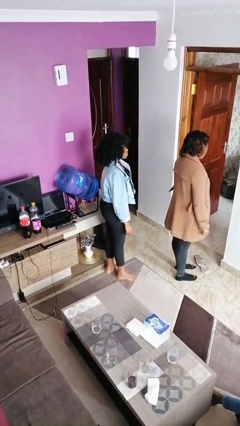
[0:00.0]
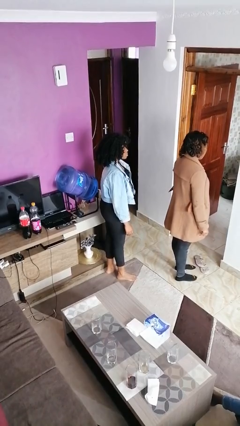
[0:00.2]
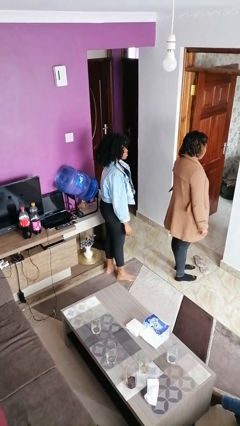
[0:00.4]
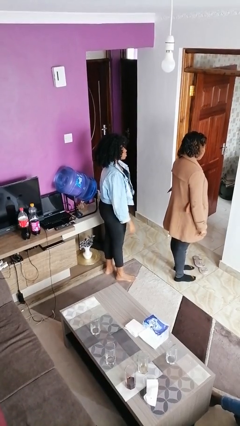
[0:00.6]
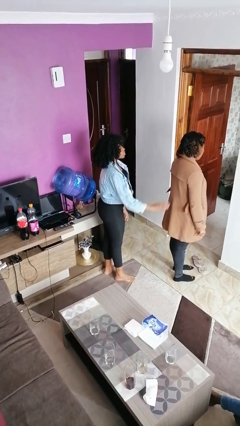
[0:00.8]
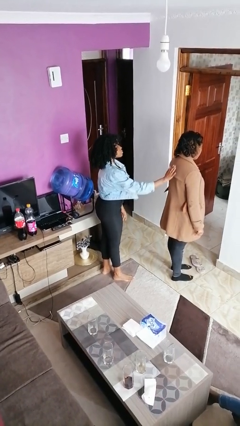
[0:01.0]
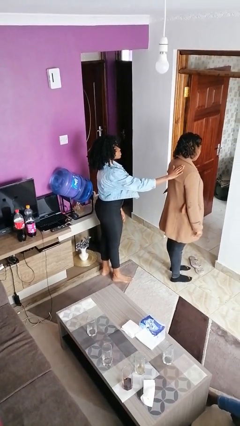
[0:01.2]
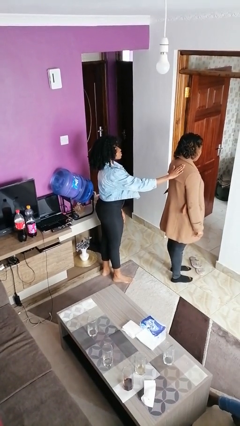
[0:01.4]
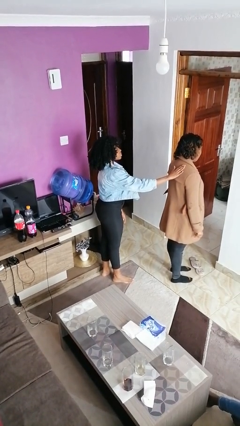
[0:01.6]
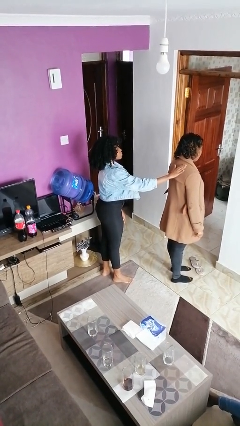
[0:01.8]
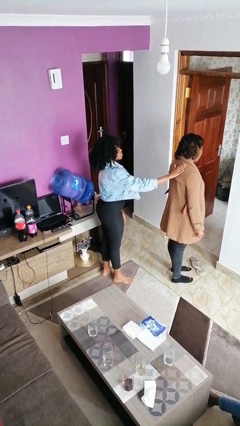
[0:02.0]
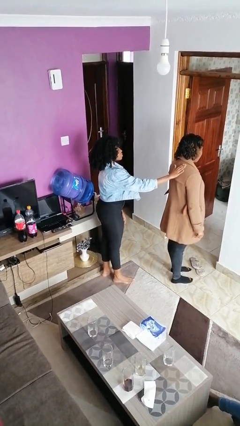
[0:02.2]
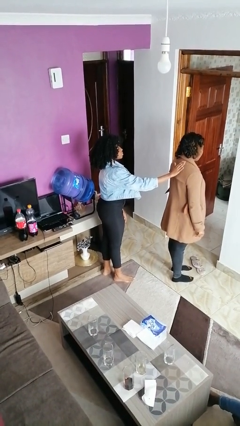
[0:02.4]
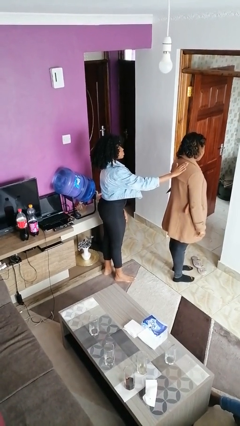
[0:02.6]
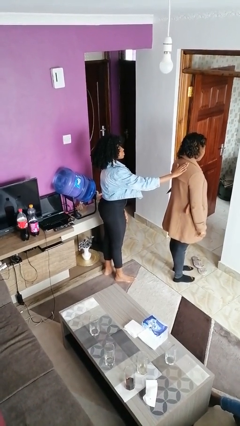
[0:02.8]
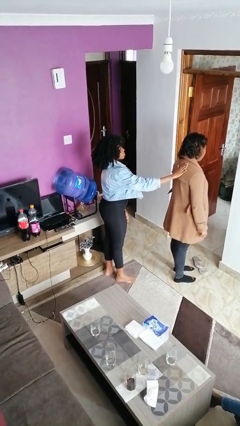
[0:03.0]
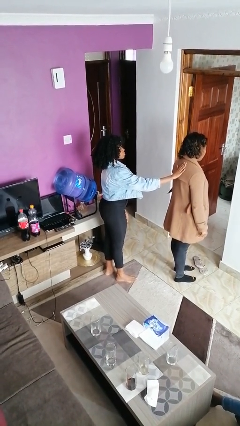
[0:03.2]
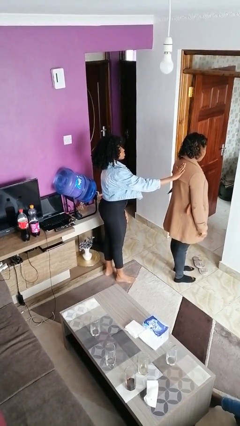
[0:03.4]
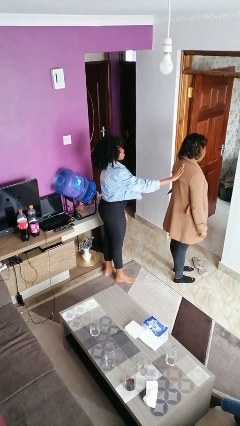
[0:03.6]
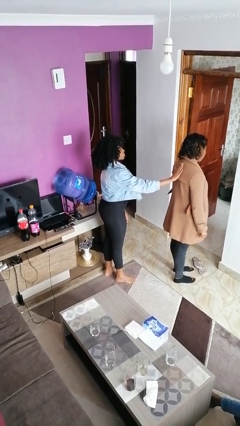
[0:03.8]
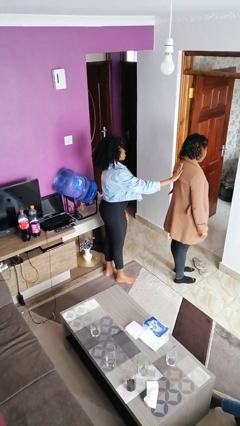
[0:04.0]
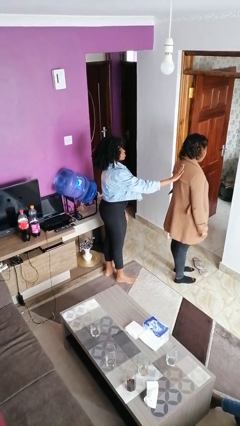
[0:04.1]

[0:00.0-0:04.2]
person touches back of person

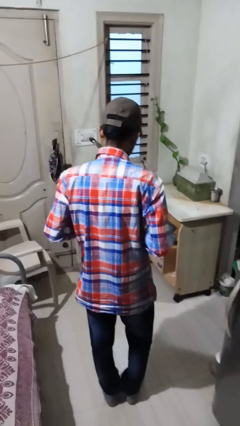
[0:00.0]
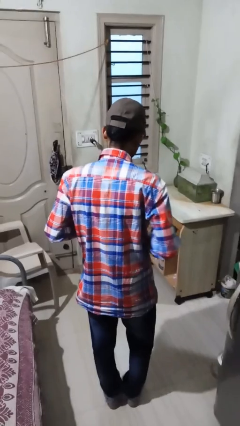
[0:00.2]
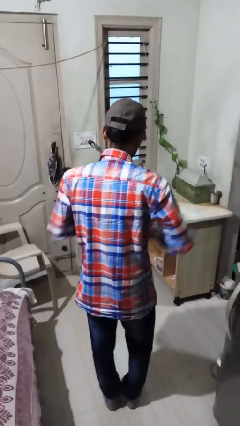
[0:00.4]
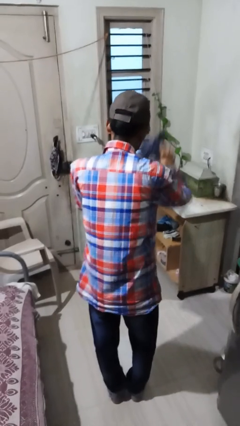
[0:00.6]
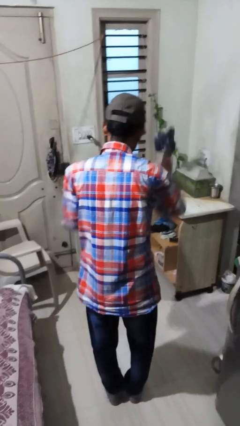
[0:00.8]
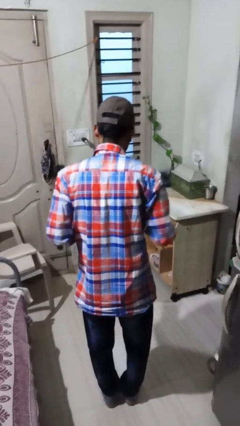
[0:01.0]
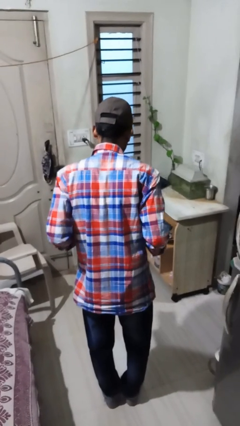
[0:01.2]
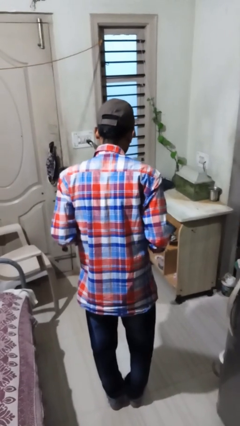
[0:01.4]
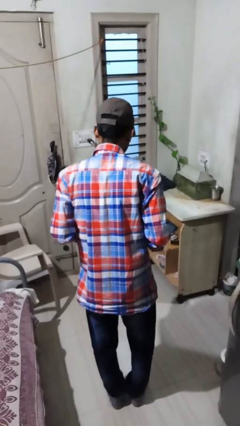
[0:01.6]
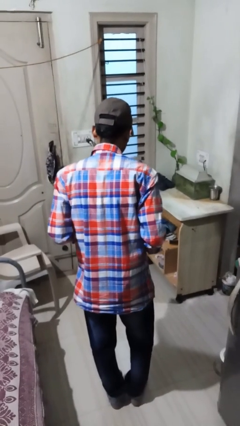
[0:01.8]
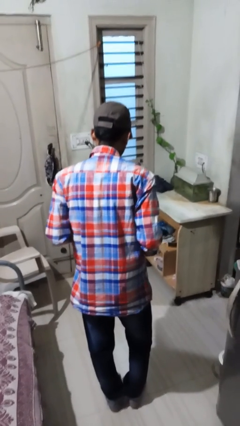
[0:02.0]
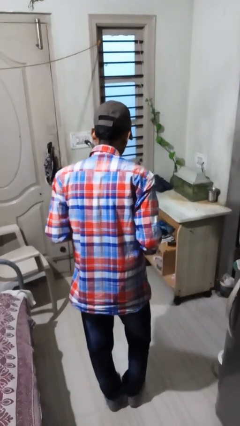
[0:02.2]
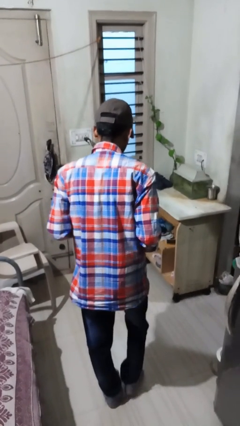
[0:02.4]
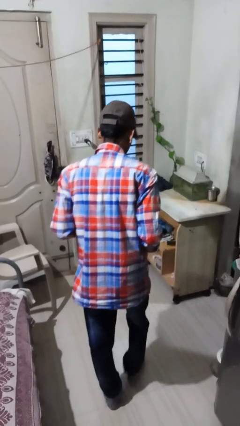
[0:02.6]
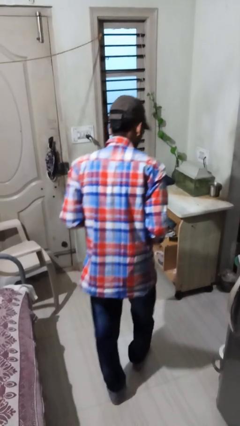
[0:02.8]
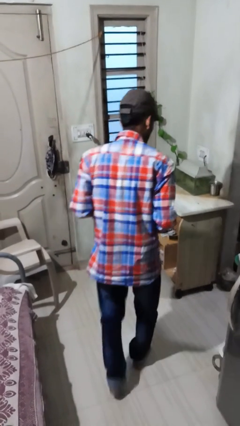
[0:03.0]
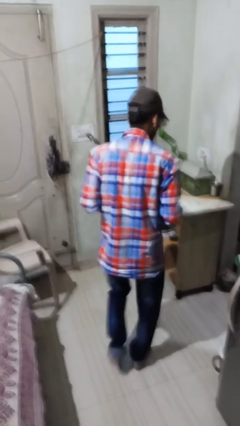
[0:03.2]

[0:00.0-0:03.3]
person throws object on table

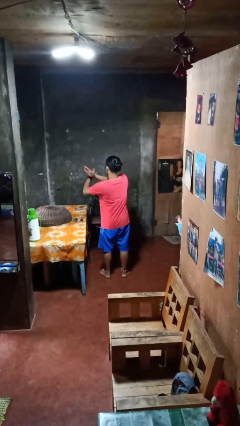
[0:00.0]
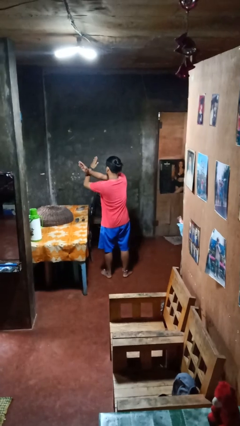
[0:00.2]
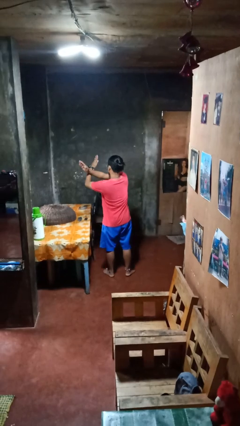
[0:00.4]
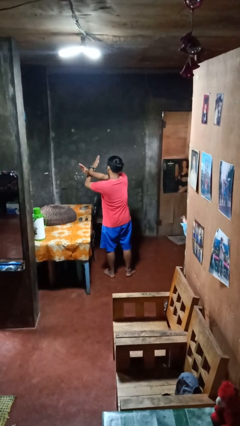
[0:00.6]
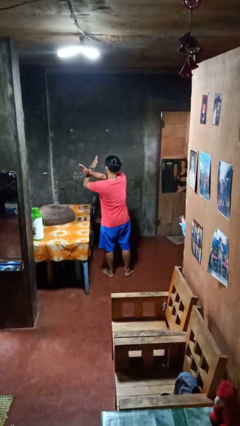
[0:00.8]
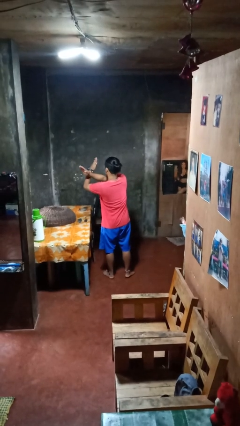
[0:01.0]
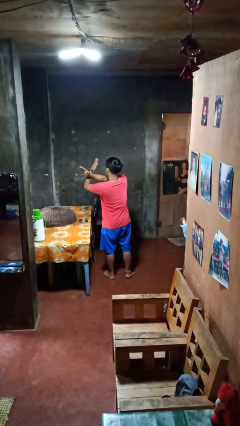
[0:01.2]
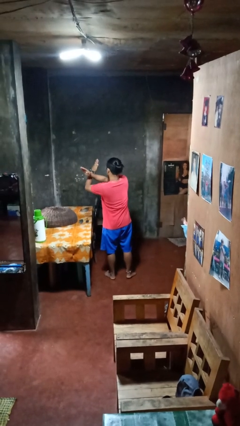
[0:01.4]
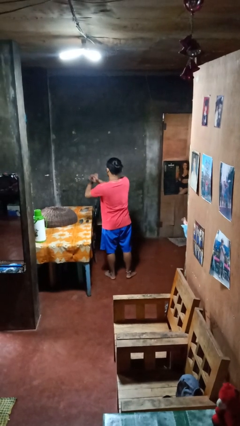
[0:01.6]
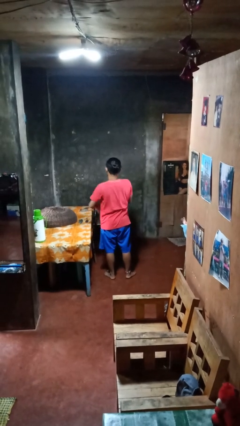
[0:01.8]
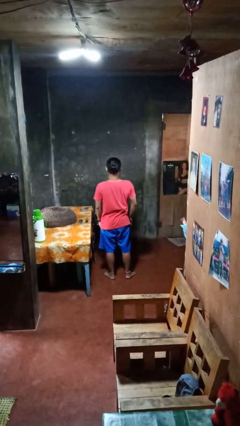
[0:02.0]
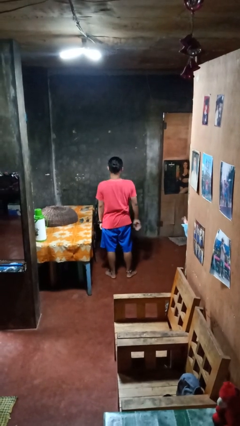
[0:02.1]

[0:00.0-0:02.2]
person gestures arms x

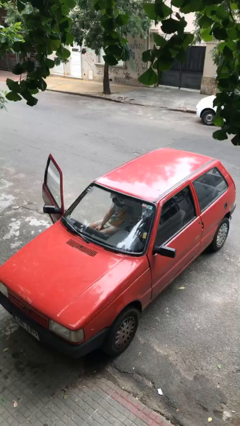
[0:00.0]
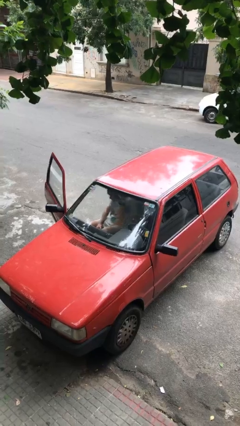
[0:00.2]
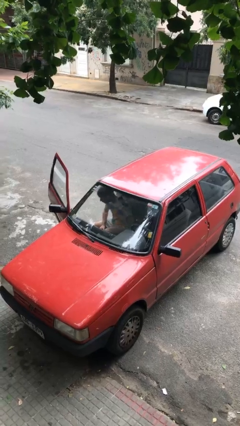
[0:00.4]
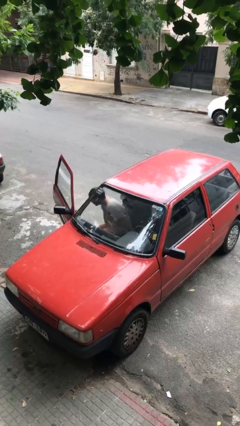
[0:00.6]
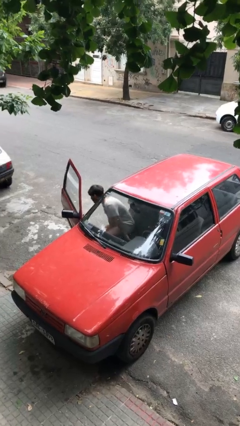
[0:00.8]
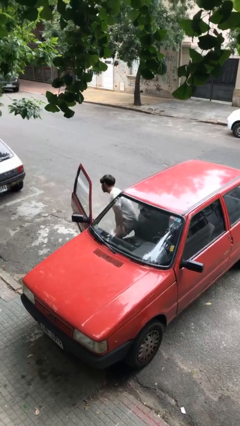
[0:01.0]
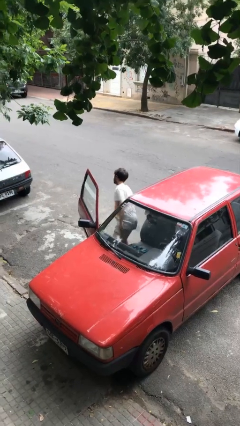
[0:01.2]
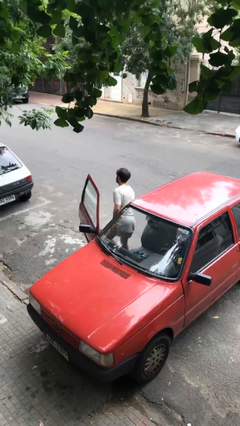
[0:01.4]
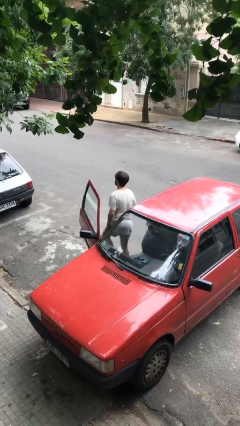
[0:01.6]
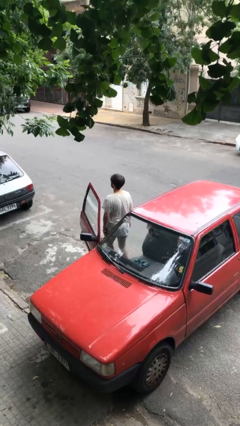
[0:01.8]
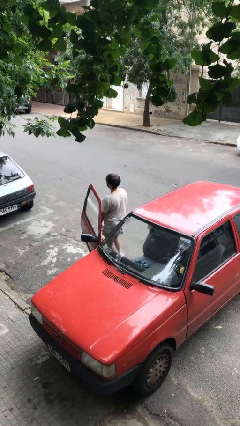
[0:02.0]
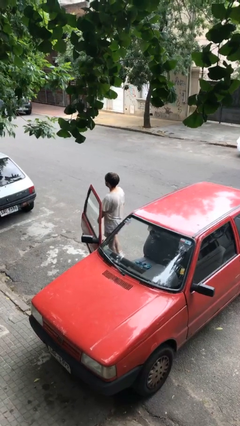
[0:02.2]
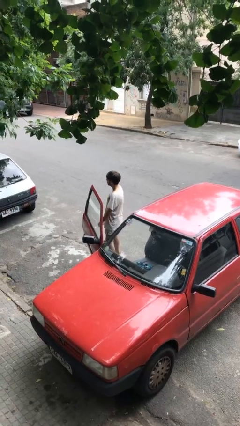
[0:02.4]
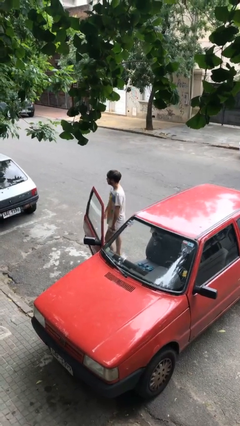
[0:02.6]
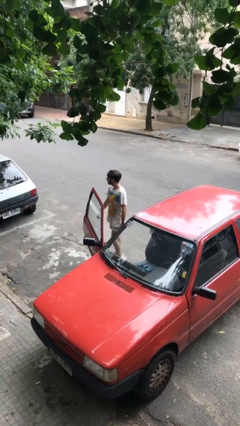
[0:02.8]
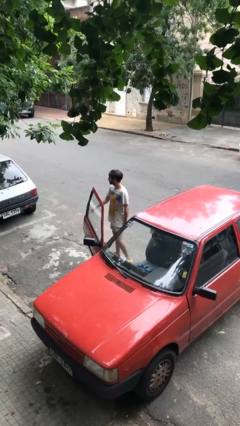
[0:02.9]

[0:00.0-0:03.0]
person exits car

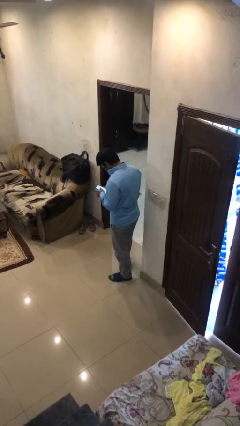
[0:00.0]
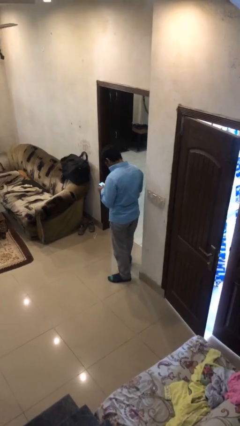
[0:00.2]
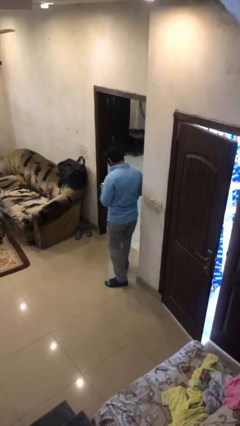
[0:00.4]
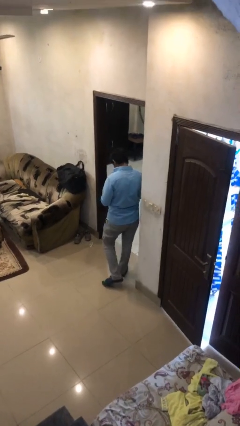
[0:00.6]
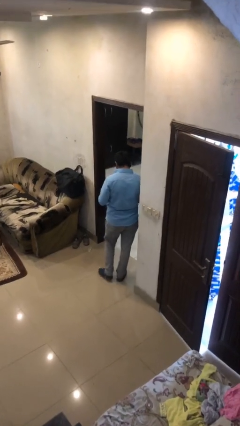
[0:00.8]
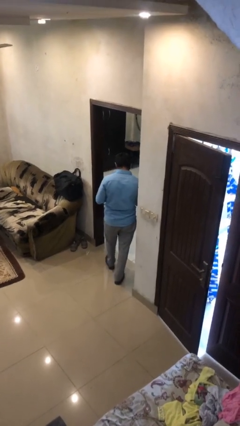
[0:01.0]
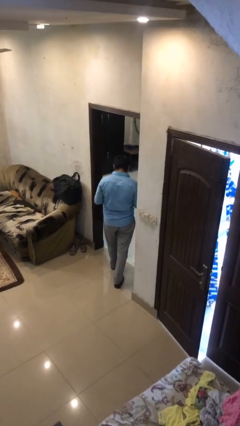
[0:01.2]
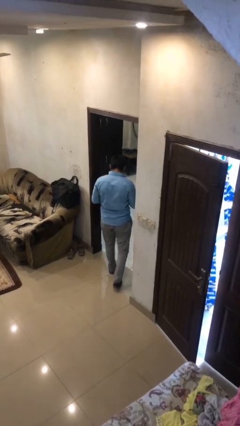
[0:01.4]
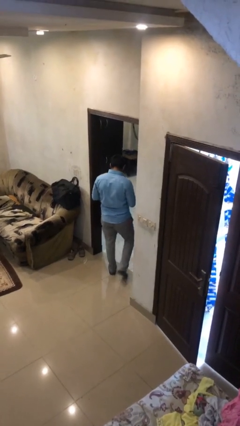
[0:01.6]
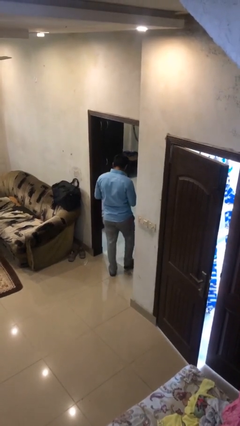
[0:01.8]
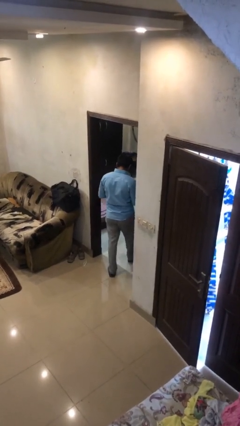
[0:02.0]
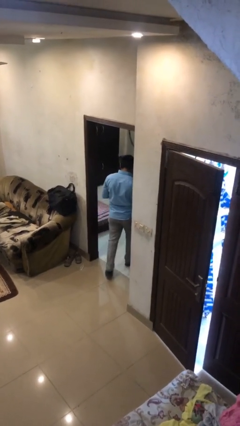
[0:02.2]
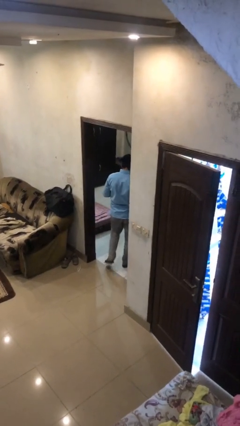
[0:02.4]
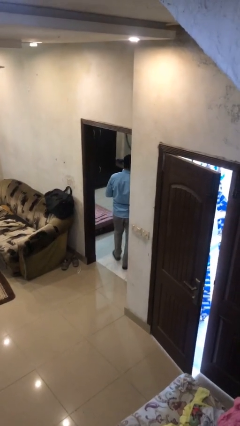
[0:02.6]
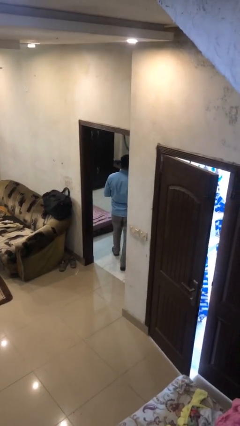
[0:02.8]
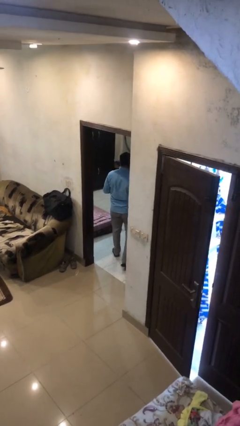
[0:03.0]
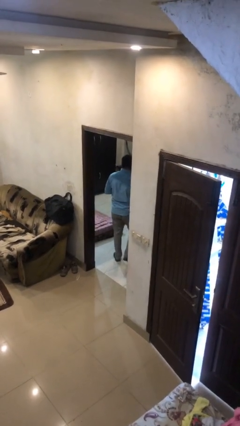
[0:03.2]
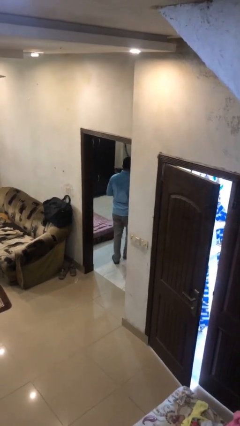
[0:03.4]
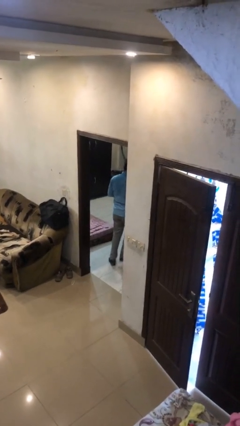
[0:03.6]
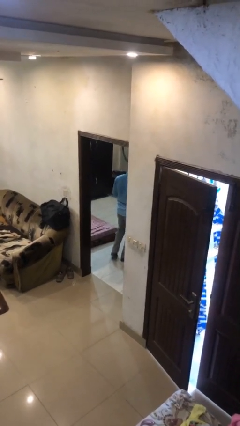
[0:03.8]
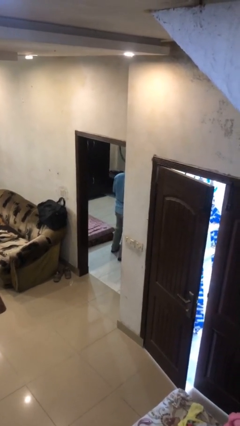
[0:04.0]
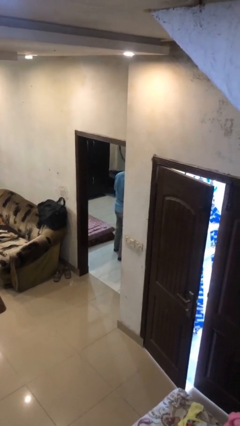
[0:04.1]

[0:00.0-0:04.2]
person exits scene through structure

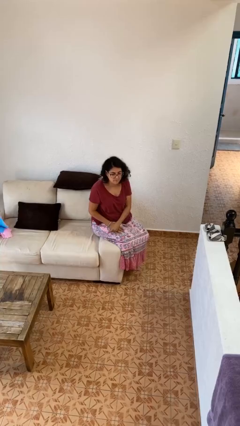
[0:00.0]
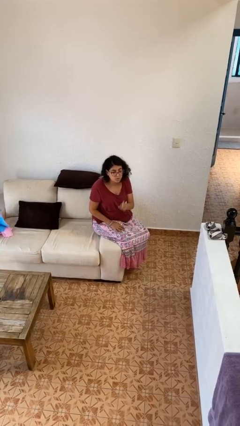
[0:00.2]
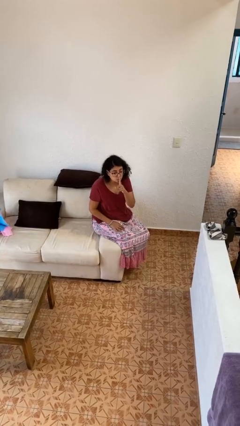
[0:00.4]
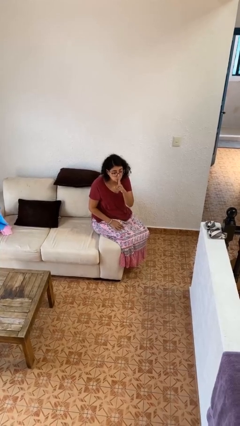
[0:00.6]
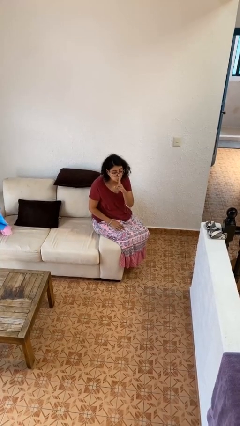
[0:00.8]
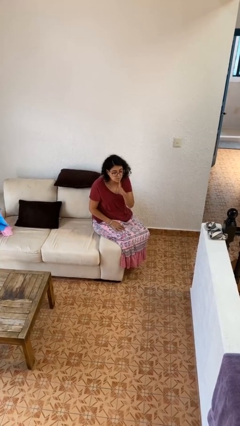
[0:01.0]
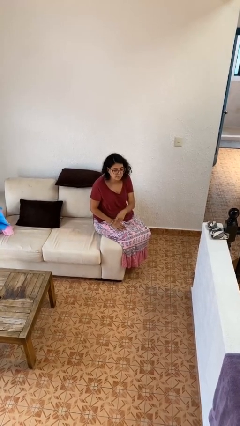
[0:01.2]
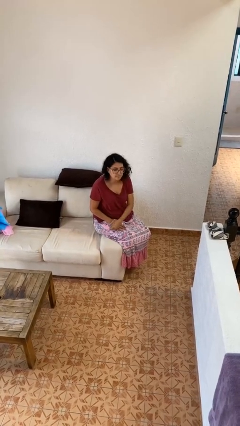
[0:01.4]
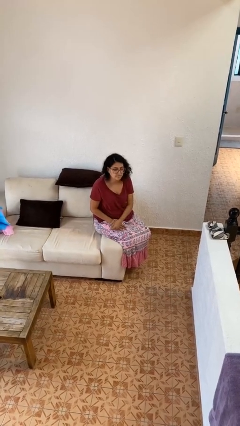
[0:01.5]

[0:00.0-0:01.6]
person gestures be quiet
